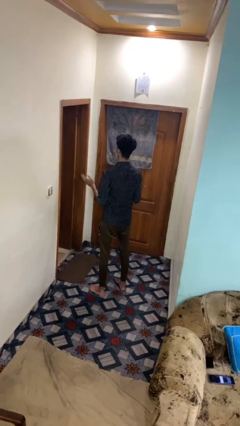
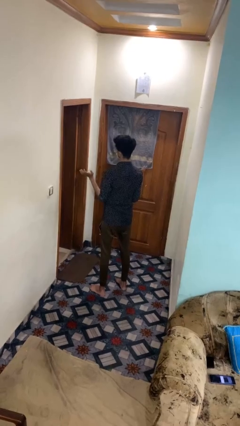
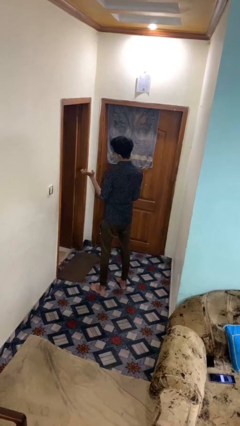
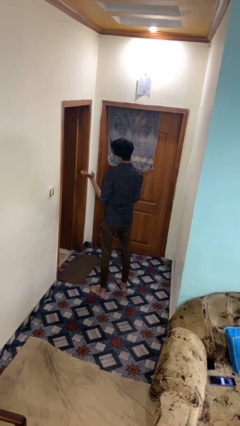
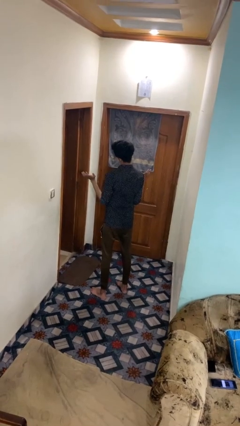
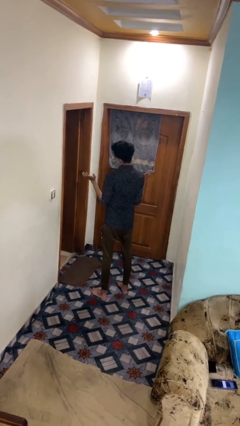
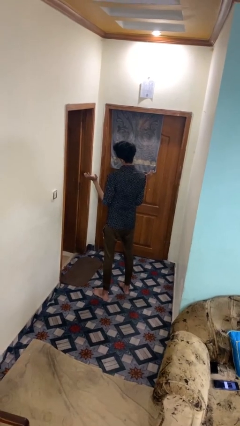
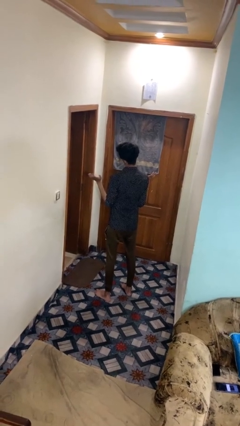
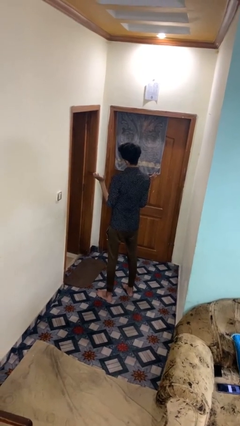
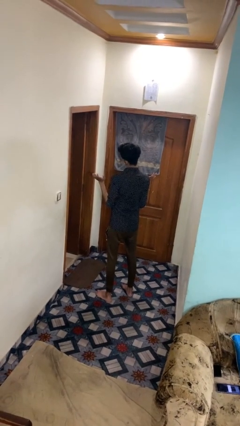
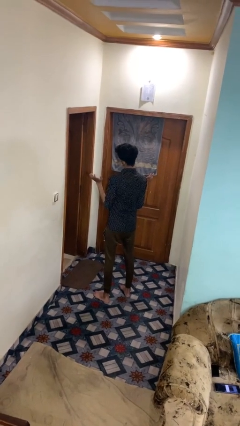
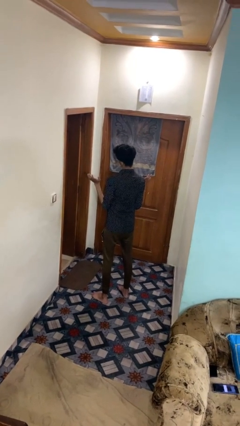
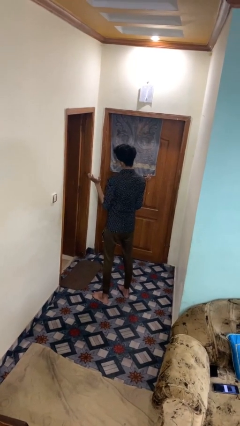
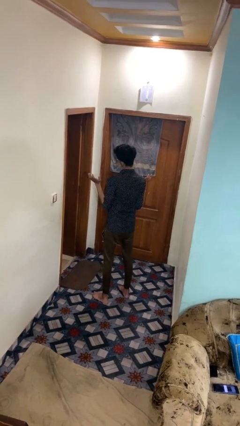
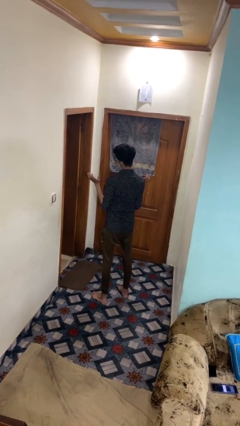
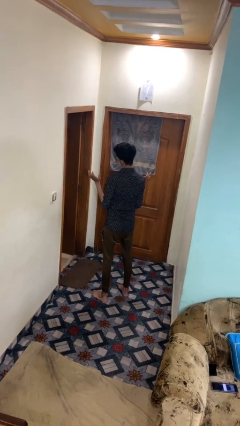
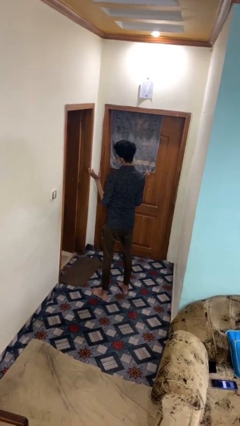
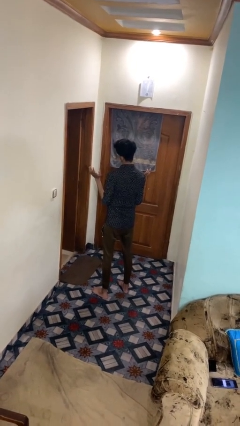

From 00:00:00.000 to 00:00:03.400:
person shrugs

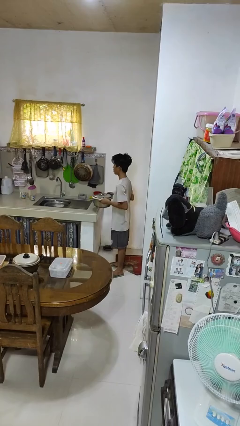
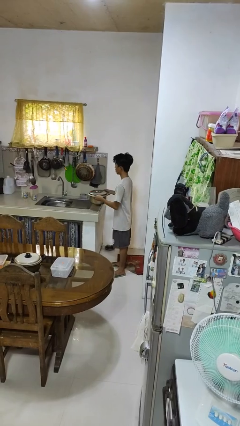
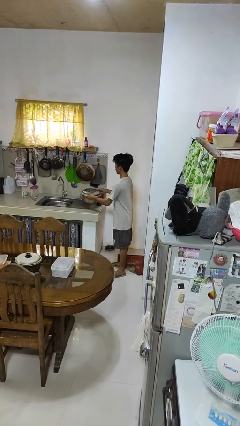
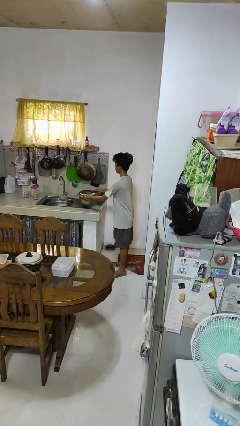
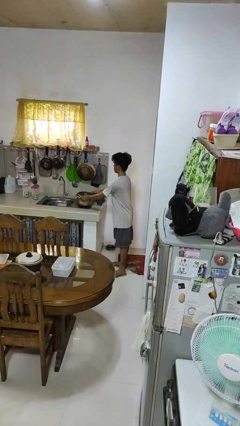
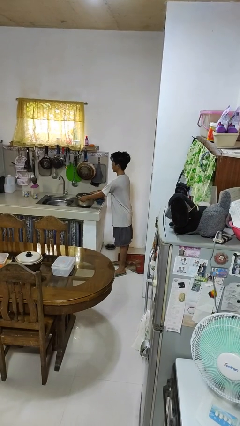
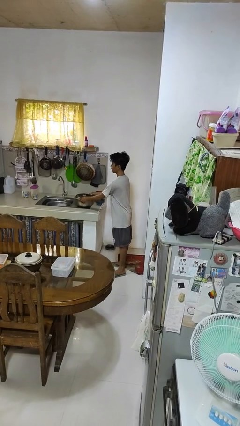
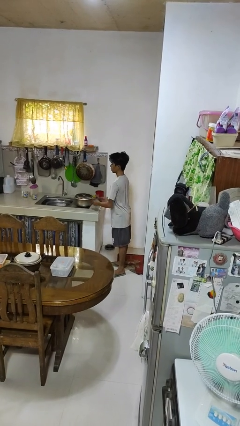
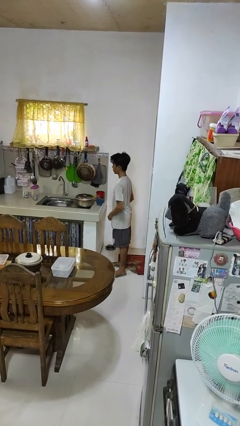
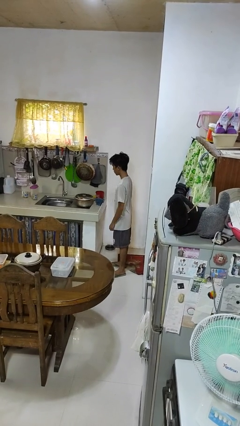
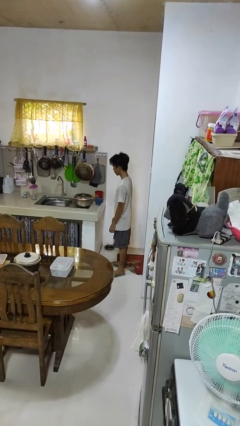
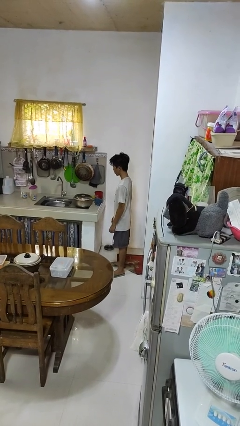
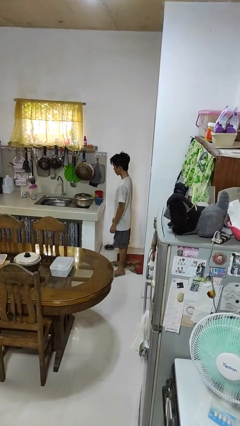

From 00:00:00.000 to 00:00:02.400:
person puts down object on countertop

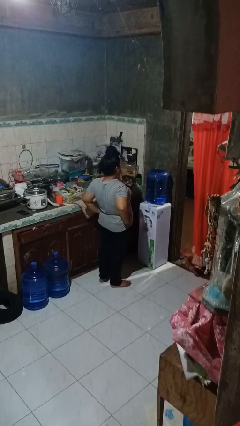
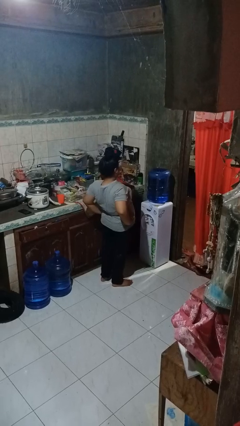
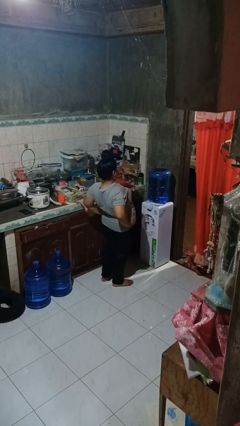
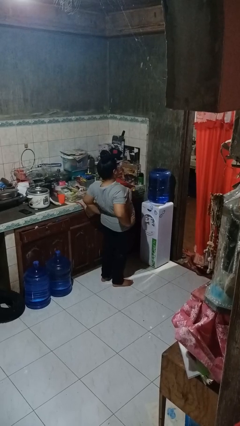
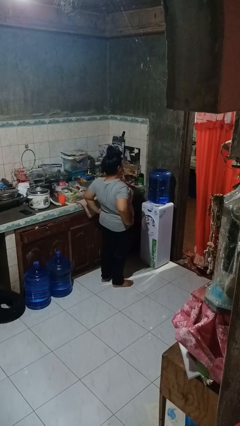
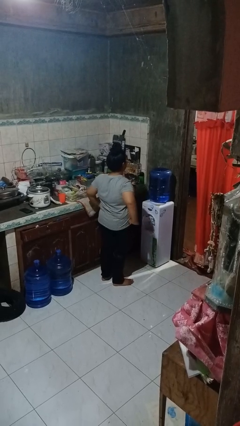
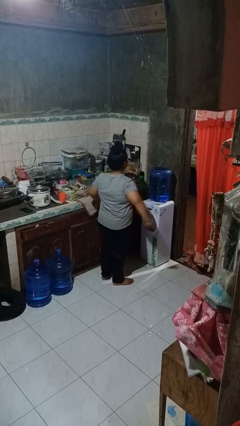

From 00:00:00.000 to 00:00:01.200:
person stretches back

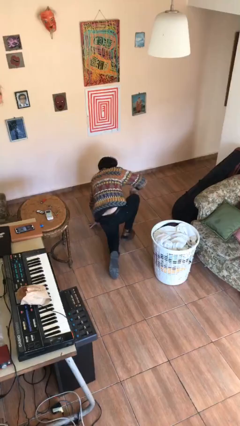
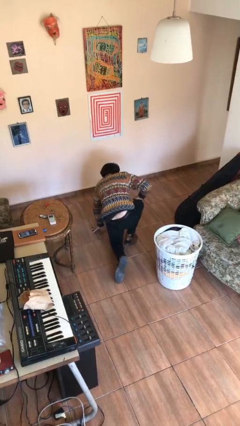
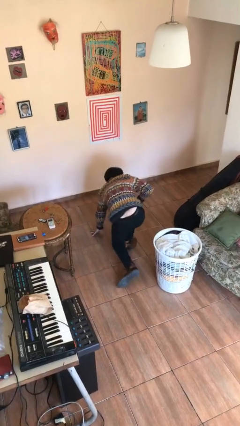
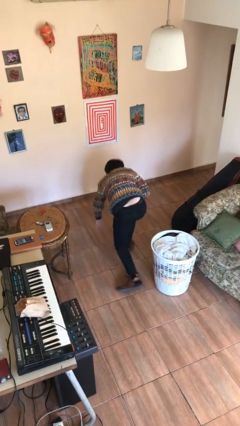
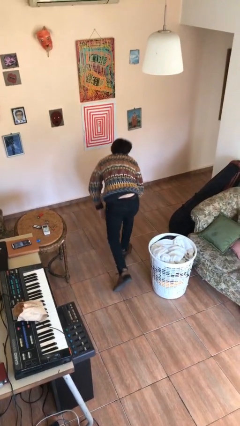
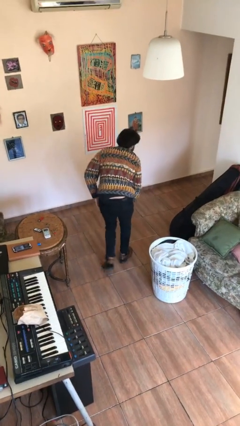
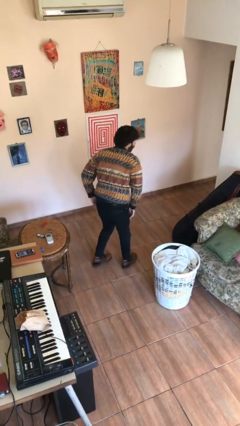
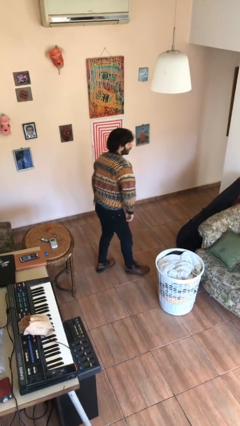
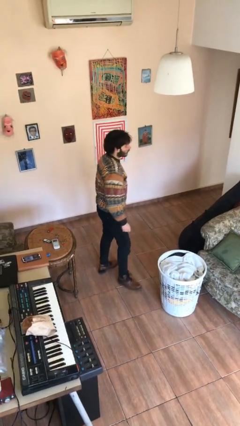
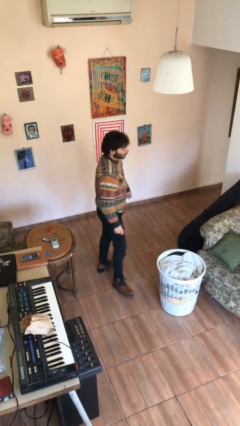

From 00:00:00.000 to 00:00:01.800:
person stands up from floor

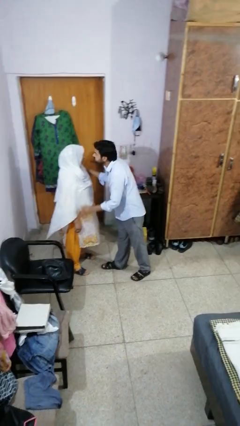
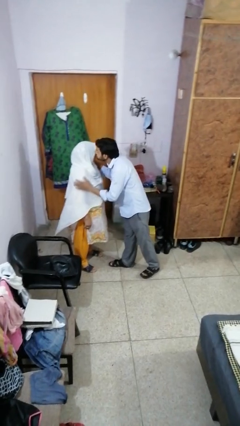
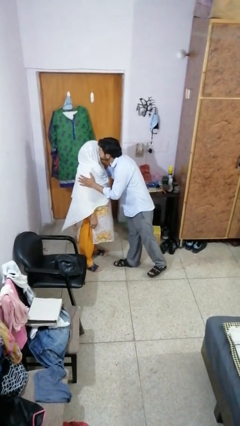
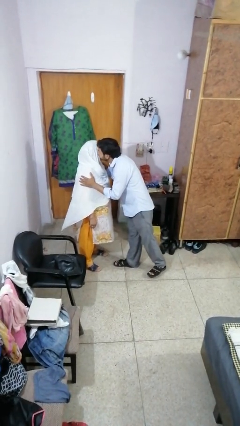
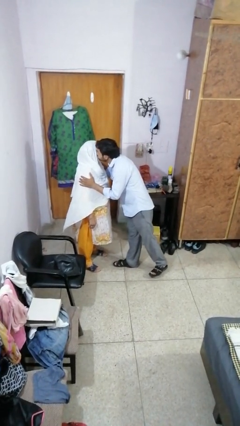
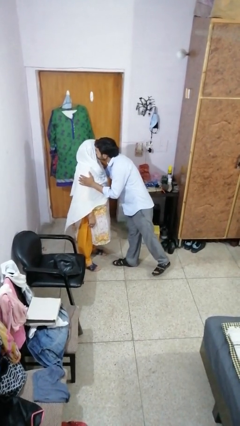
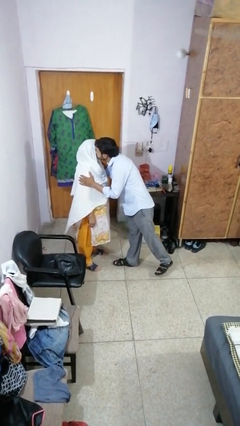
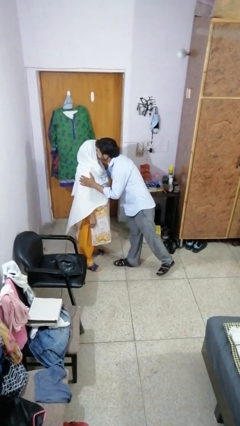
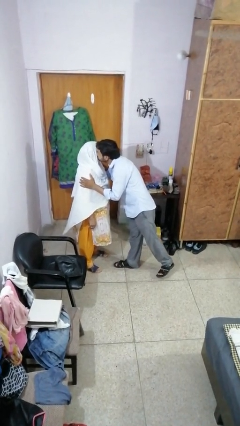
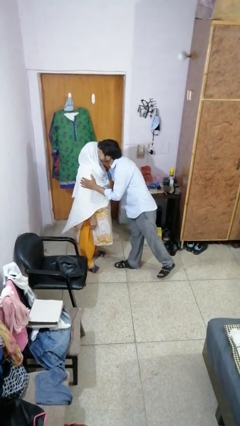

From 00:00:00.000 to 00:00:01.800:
person kisses cheek of person

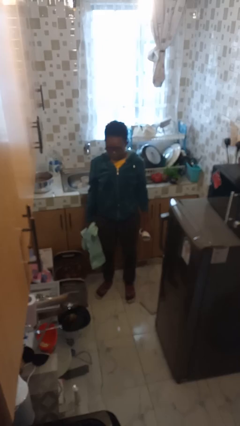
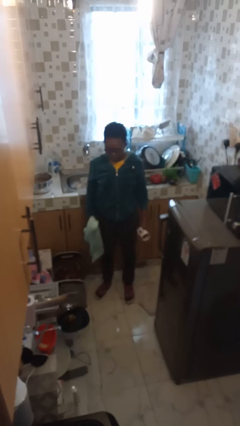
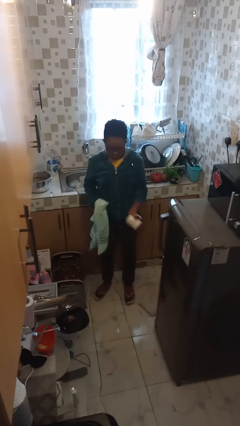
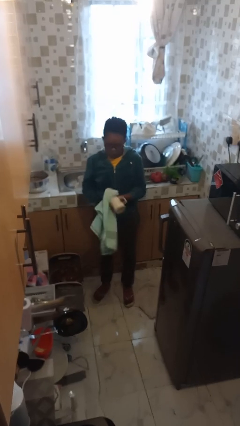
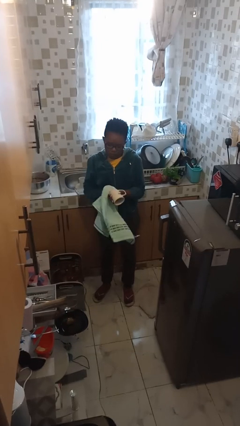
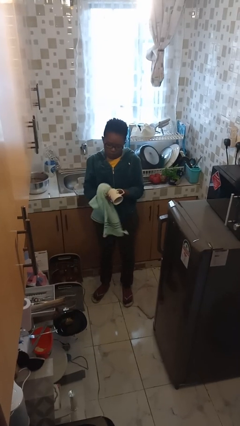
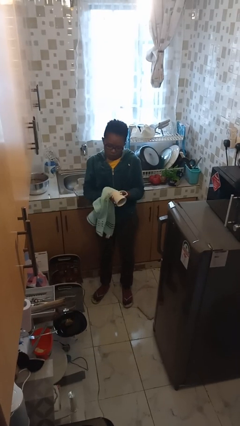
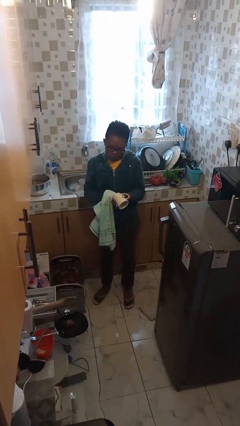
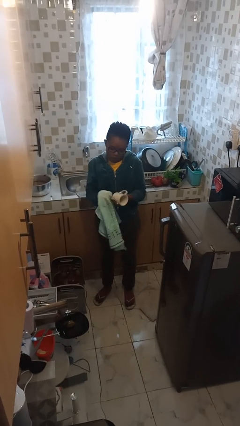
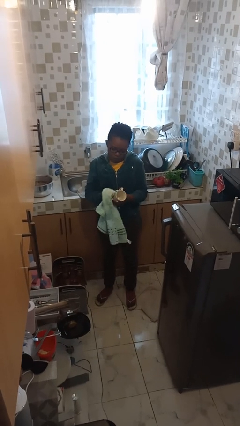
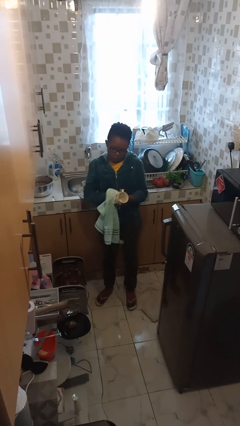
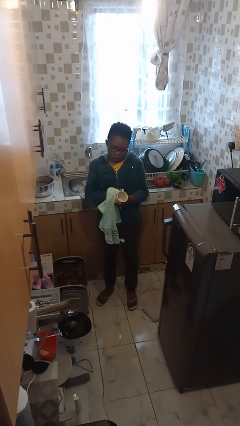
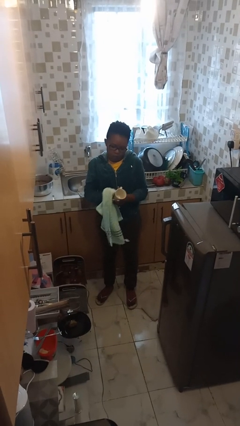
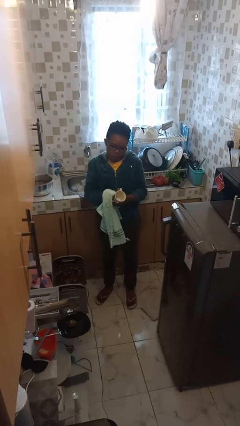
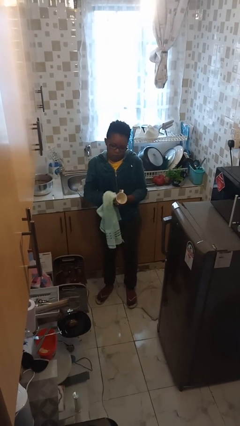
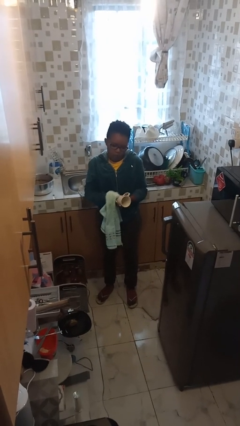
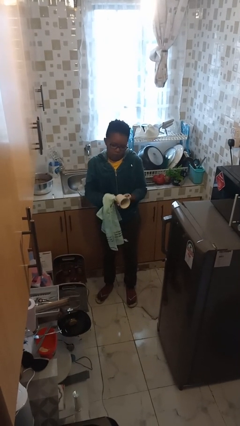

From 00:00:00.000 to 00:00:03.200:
person dries dish

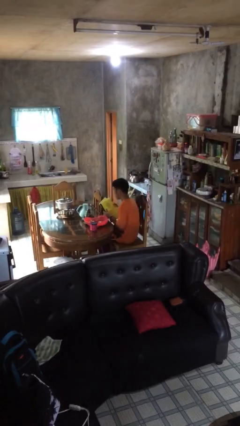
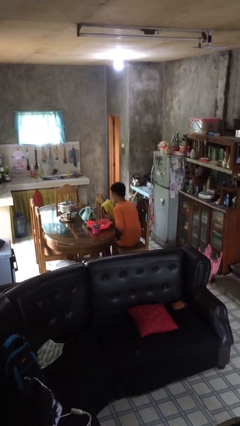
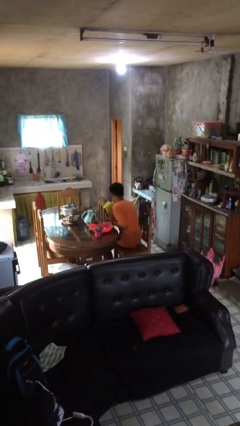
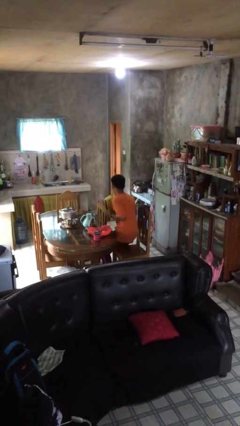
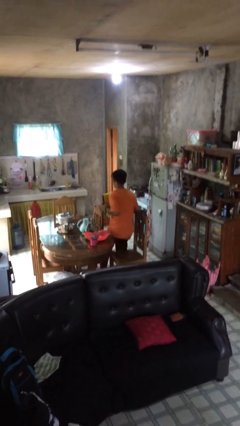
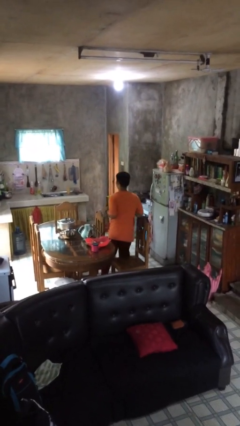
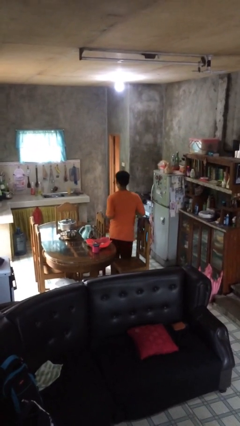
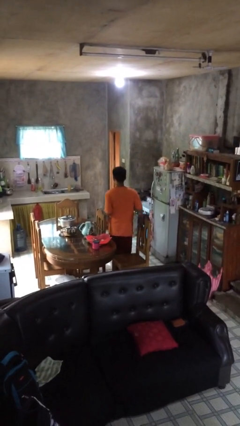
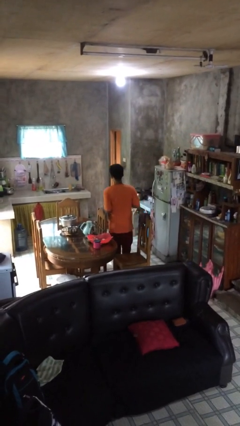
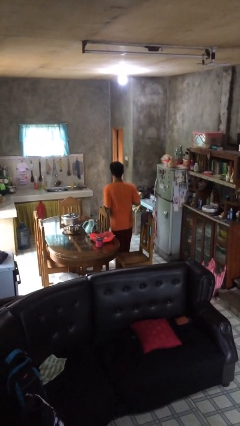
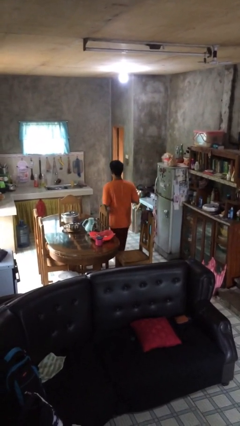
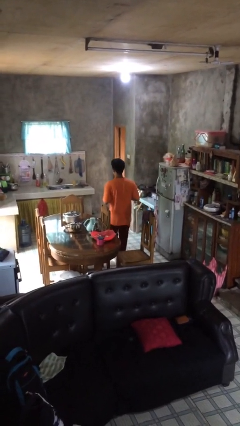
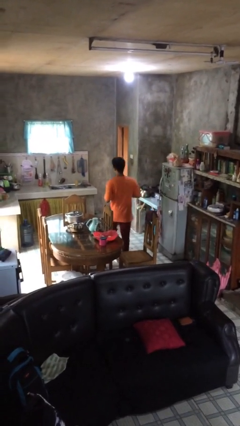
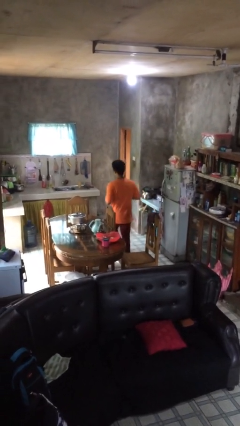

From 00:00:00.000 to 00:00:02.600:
person stands up

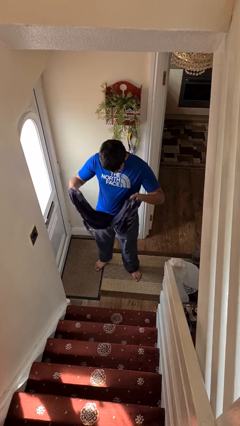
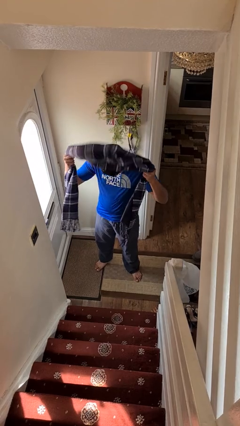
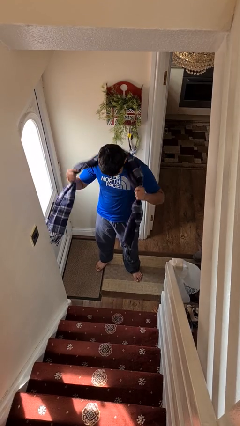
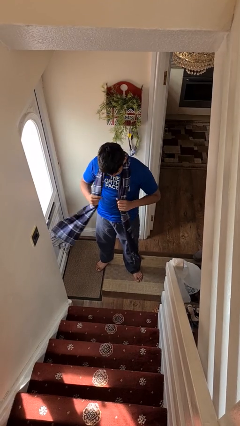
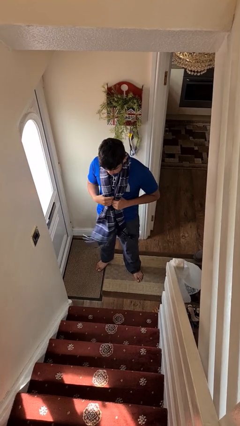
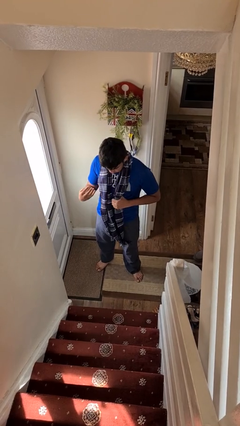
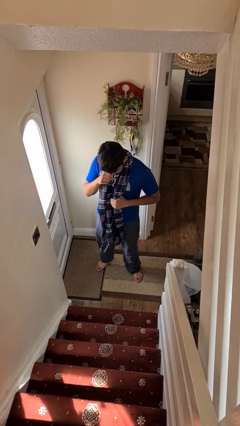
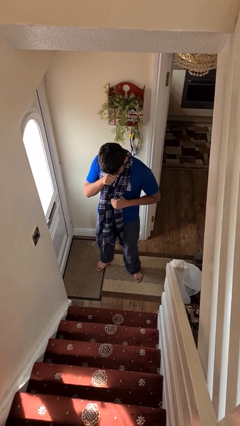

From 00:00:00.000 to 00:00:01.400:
person puts on scarf
